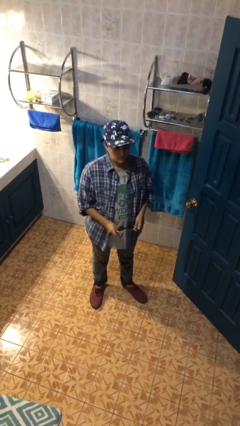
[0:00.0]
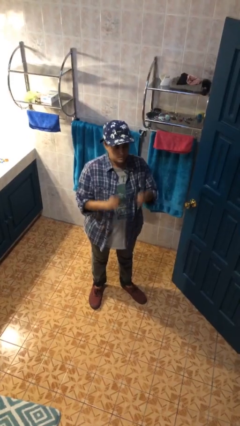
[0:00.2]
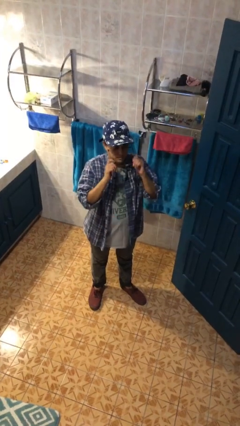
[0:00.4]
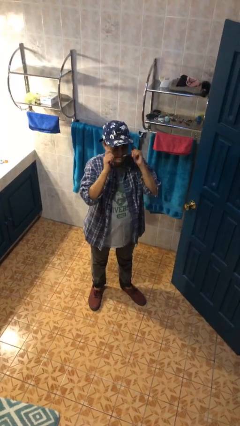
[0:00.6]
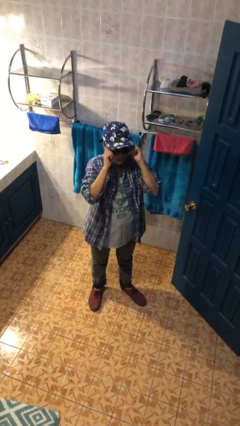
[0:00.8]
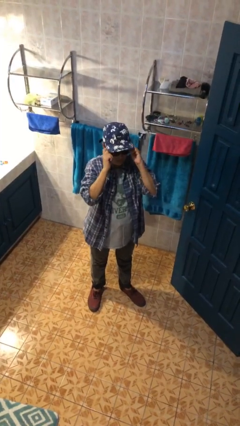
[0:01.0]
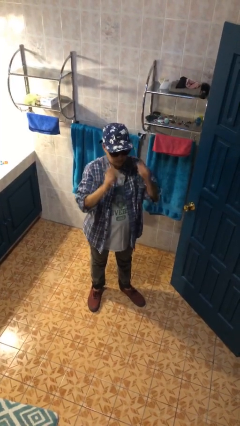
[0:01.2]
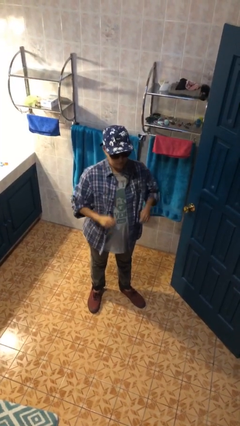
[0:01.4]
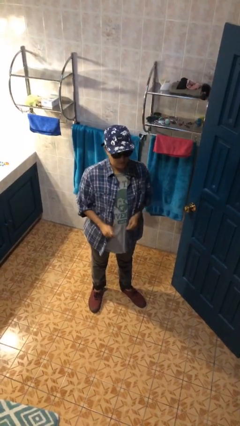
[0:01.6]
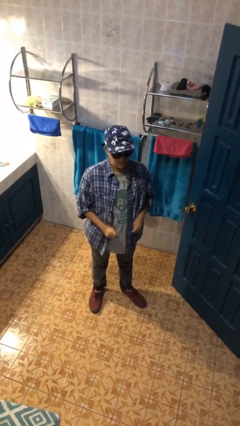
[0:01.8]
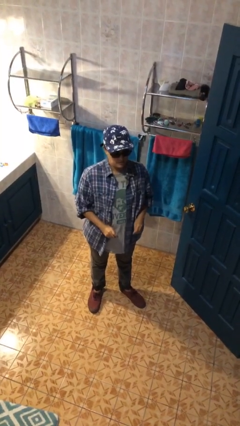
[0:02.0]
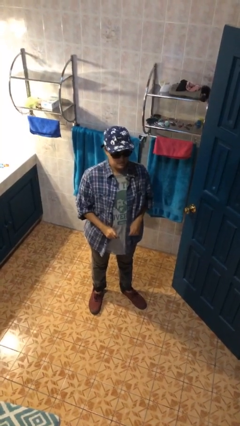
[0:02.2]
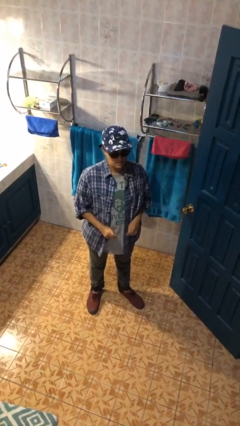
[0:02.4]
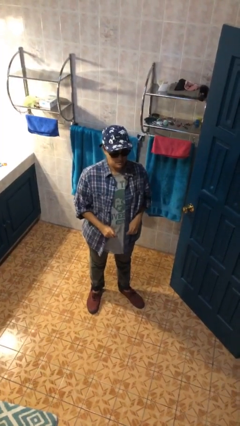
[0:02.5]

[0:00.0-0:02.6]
person puts on sunglasses

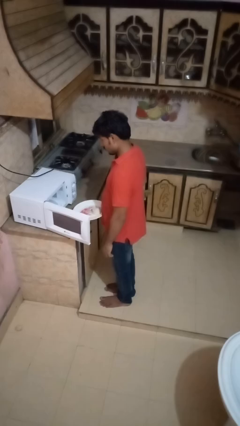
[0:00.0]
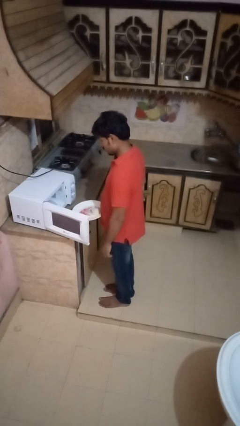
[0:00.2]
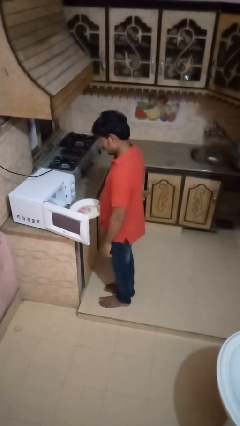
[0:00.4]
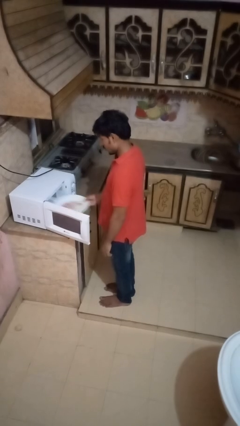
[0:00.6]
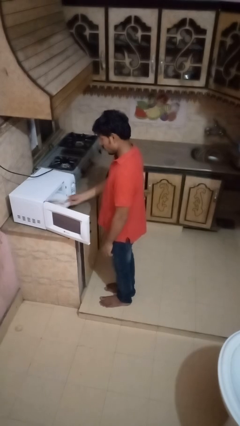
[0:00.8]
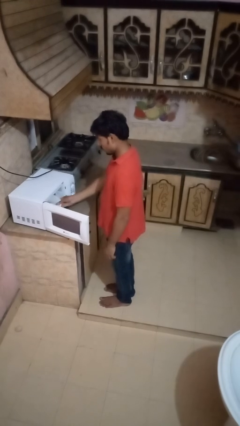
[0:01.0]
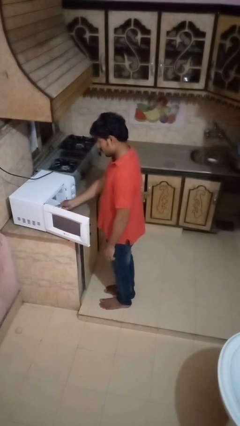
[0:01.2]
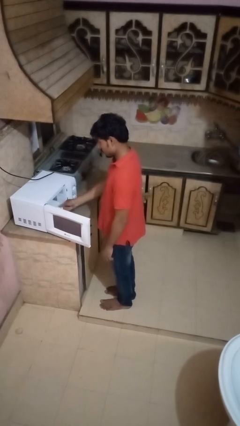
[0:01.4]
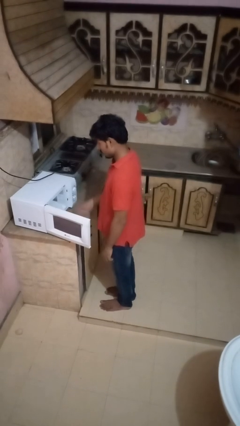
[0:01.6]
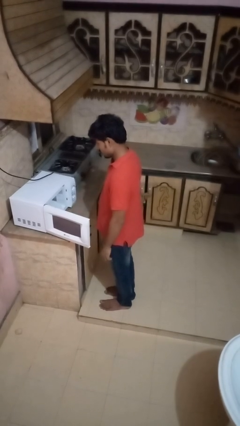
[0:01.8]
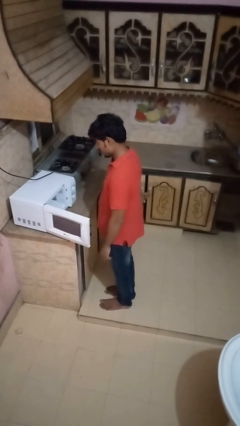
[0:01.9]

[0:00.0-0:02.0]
person puts object into oven

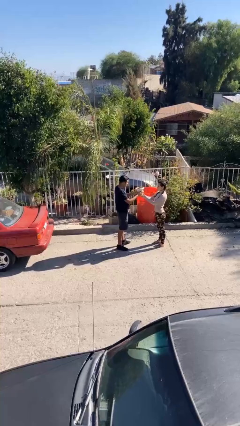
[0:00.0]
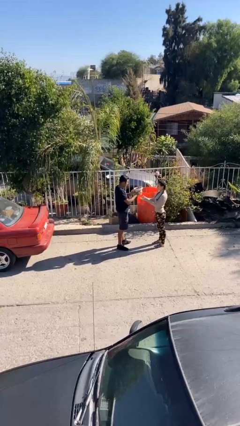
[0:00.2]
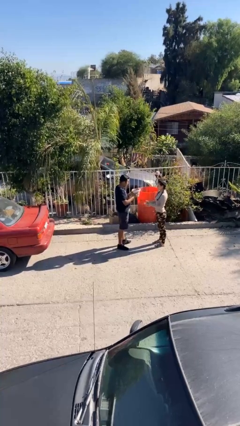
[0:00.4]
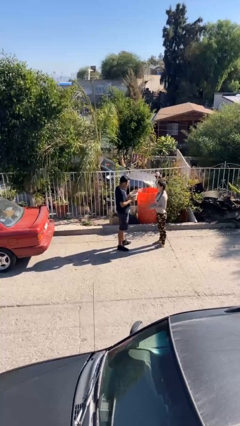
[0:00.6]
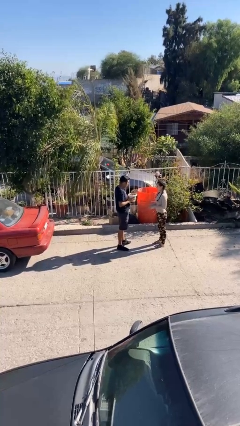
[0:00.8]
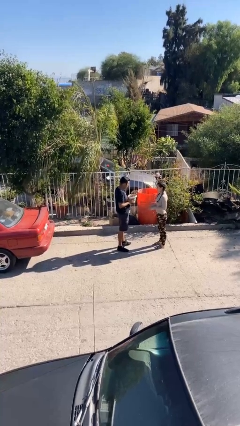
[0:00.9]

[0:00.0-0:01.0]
person transfers object to person

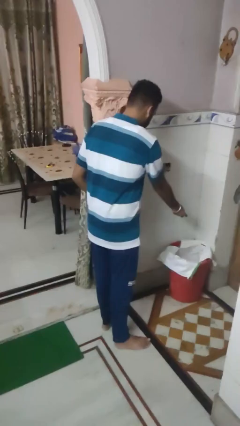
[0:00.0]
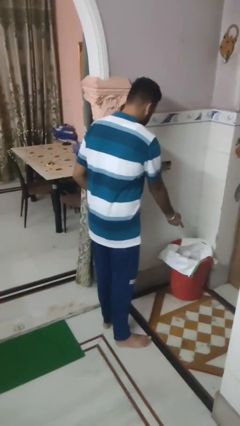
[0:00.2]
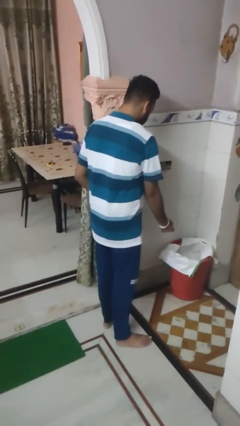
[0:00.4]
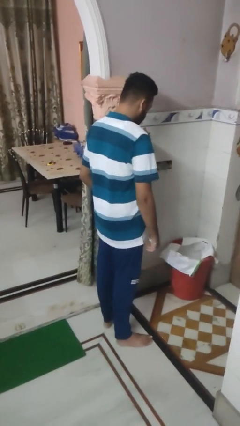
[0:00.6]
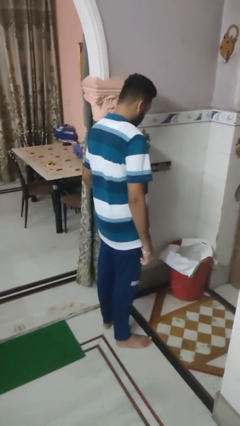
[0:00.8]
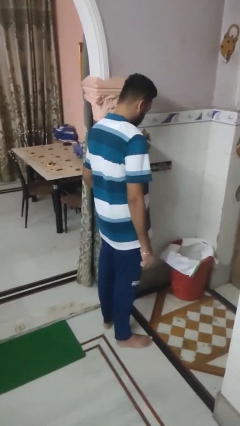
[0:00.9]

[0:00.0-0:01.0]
person discards trash

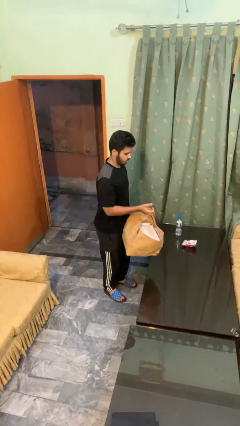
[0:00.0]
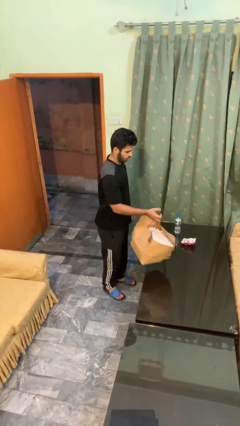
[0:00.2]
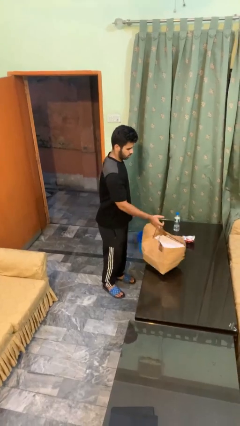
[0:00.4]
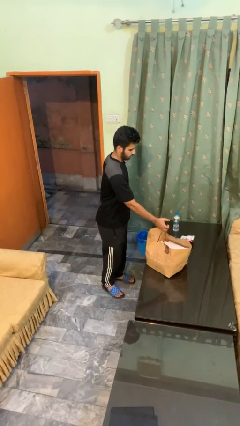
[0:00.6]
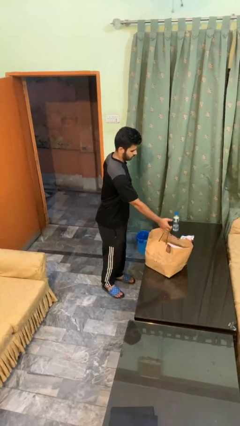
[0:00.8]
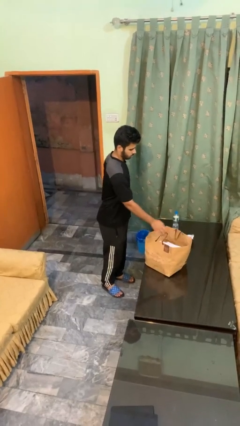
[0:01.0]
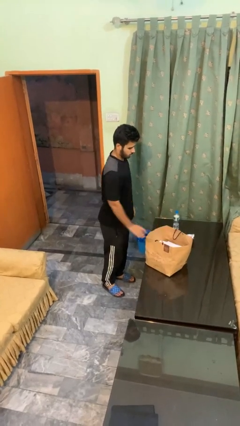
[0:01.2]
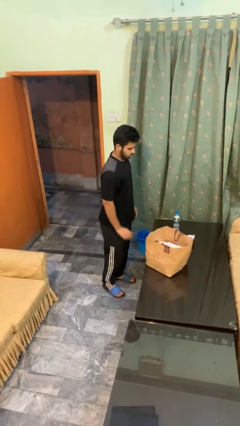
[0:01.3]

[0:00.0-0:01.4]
person puts down object on countertop

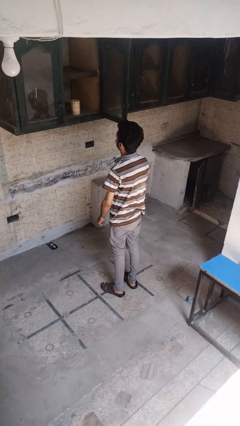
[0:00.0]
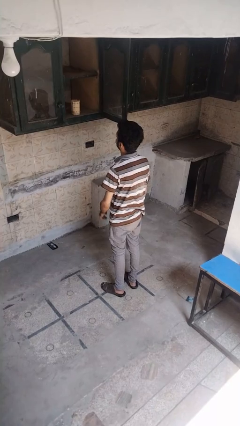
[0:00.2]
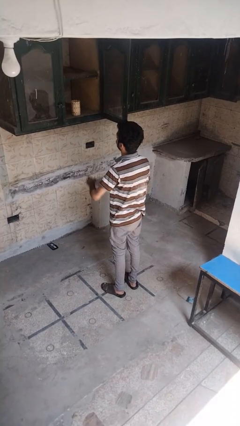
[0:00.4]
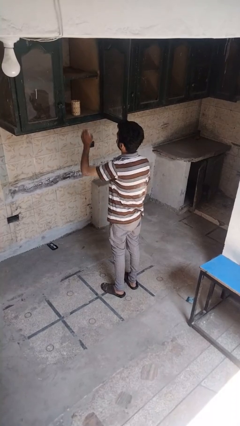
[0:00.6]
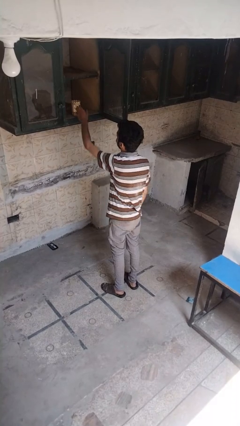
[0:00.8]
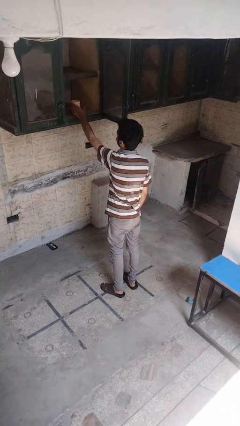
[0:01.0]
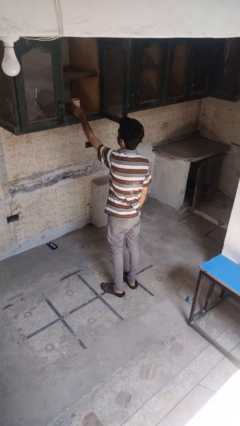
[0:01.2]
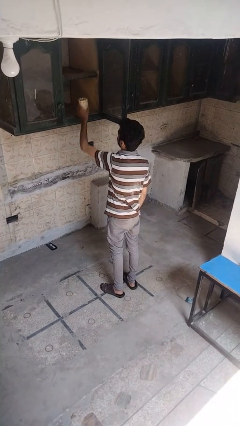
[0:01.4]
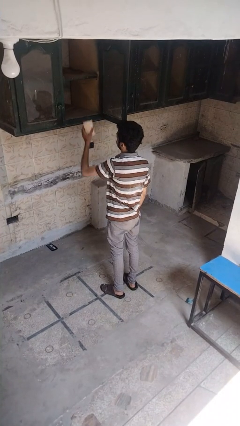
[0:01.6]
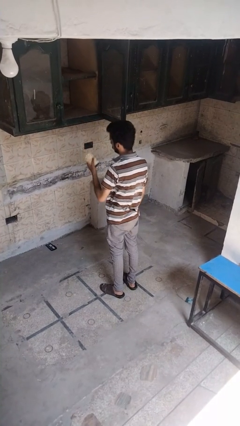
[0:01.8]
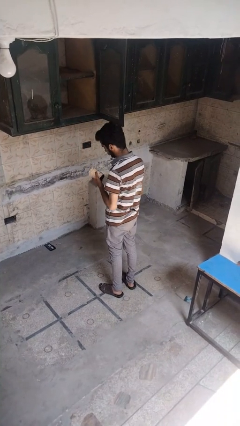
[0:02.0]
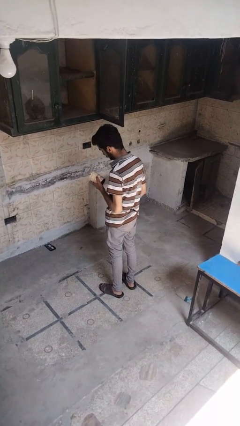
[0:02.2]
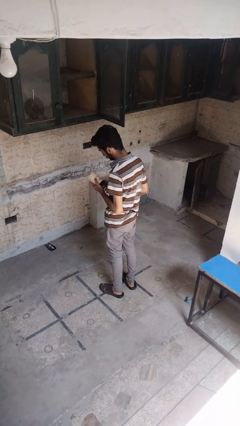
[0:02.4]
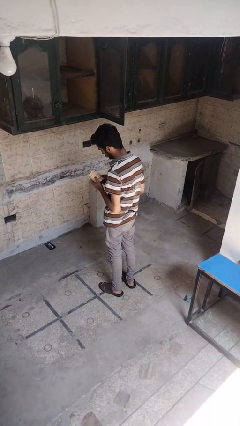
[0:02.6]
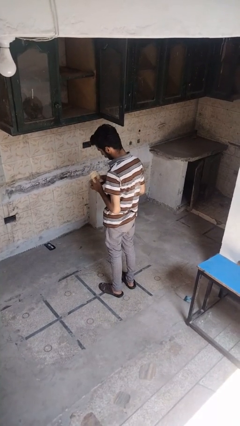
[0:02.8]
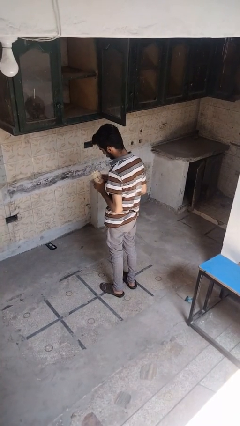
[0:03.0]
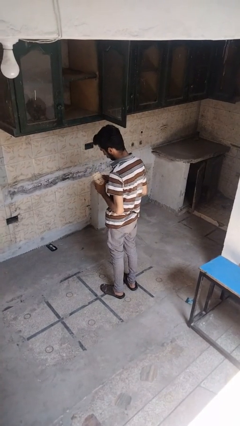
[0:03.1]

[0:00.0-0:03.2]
person picks up object from cabinet

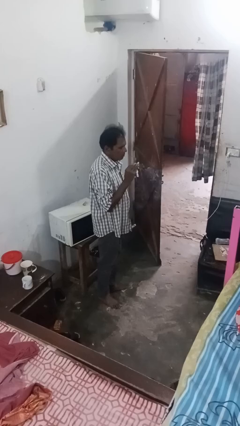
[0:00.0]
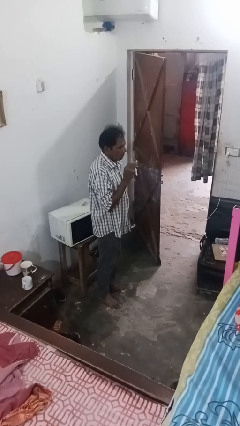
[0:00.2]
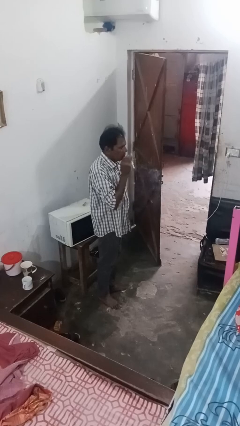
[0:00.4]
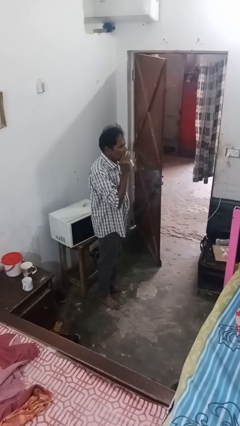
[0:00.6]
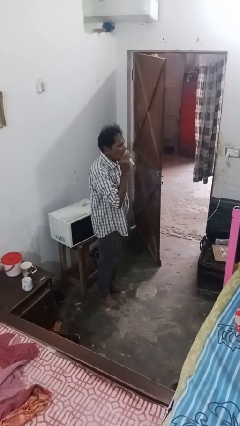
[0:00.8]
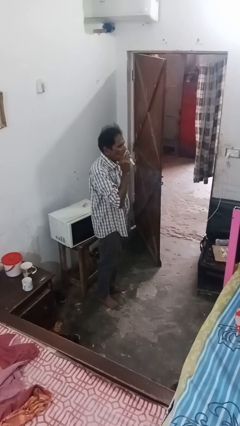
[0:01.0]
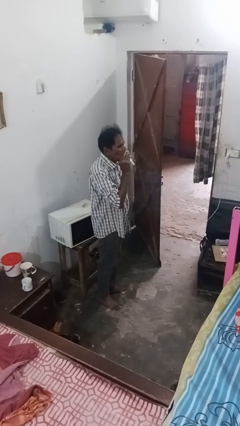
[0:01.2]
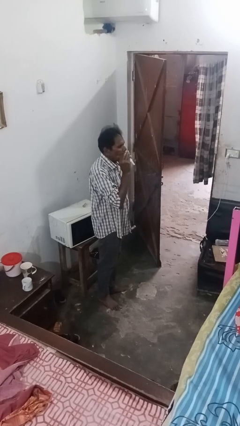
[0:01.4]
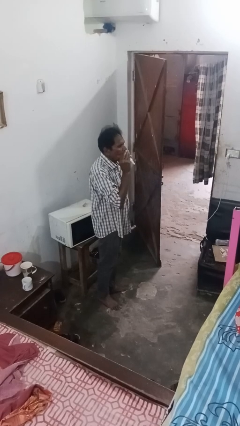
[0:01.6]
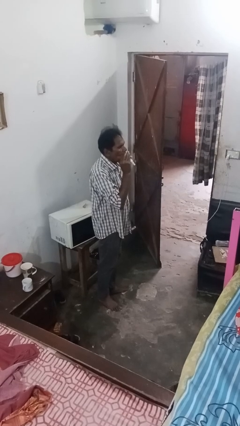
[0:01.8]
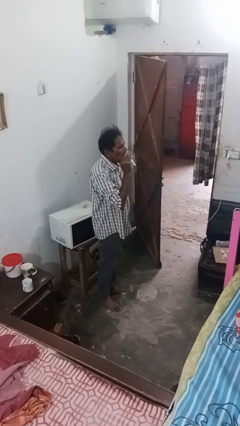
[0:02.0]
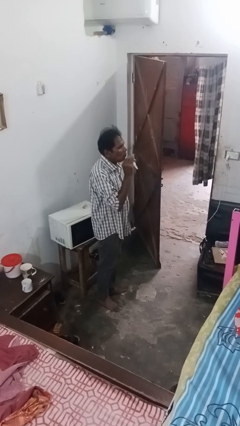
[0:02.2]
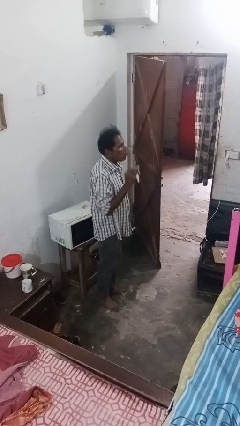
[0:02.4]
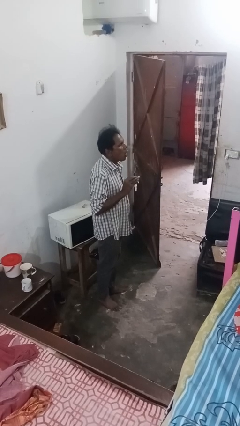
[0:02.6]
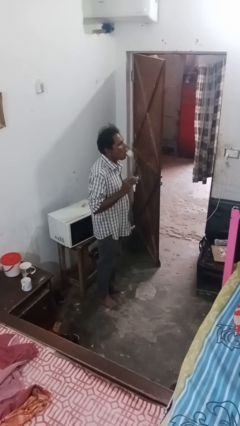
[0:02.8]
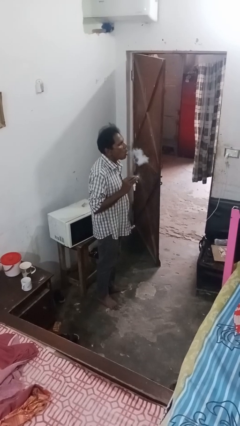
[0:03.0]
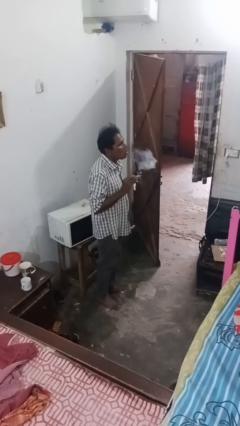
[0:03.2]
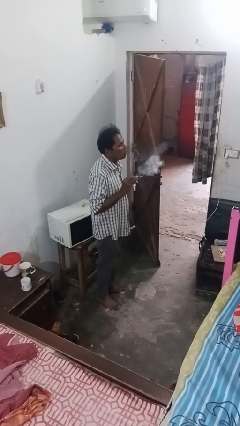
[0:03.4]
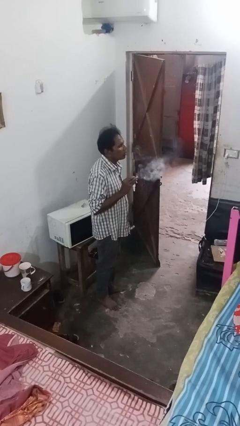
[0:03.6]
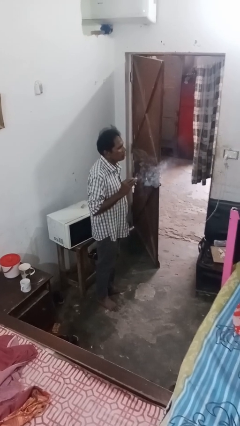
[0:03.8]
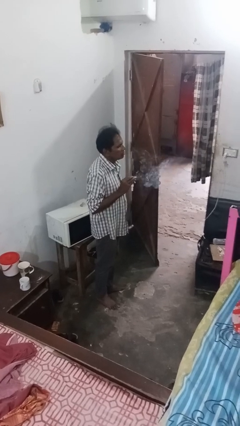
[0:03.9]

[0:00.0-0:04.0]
person vapes

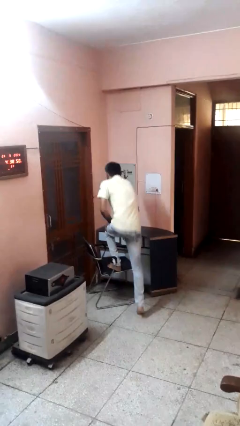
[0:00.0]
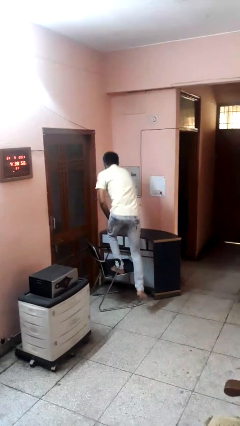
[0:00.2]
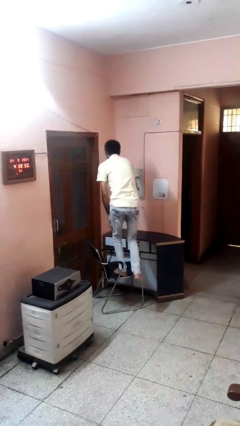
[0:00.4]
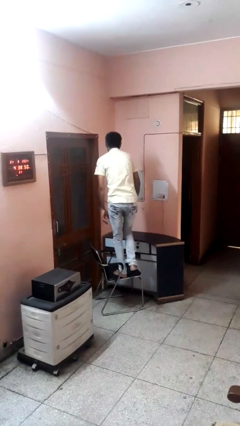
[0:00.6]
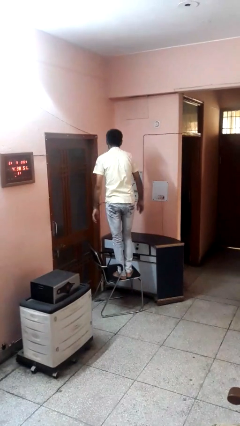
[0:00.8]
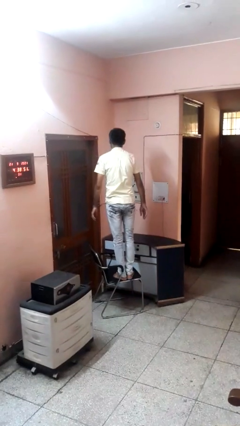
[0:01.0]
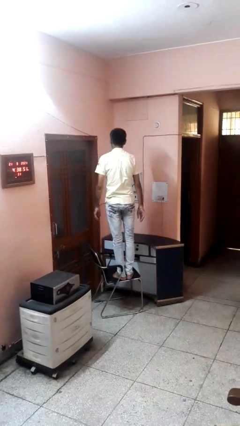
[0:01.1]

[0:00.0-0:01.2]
person climbs on chair

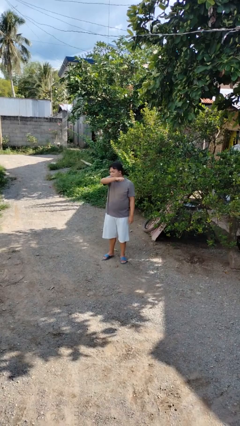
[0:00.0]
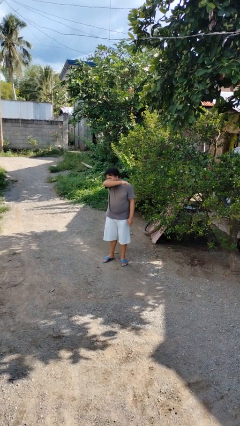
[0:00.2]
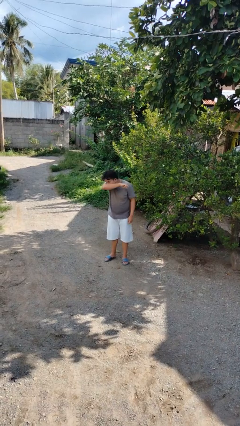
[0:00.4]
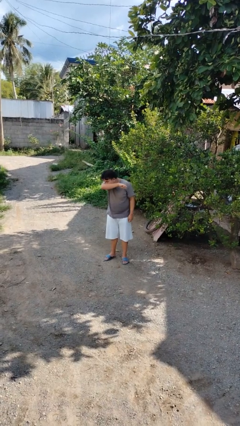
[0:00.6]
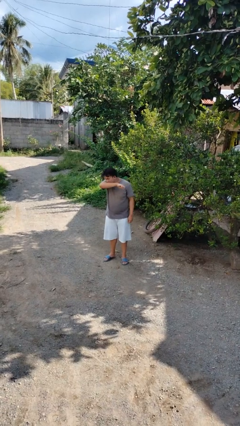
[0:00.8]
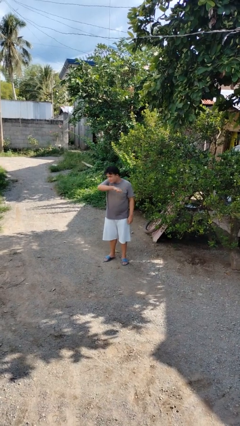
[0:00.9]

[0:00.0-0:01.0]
person sneezes into arm
